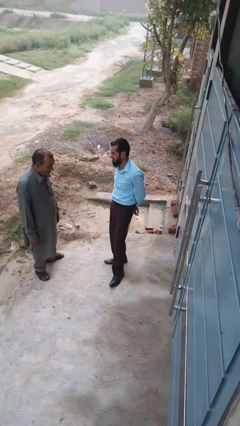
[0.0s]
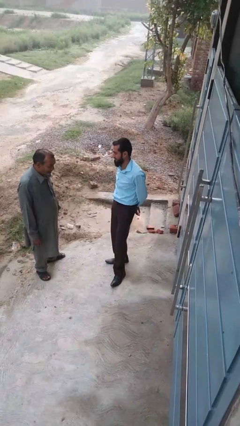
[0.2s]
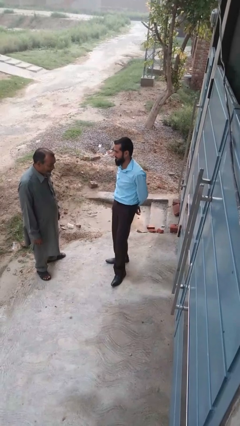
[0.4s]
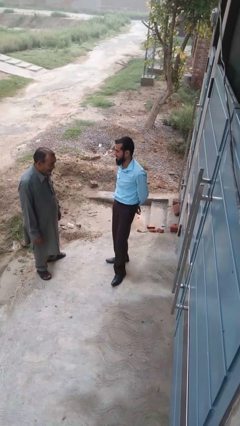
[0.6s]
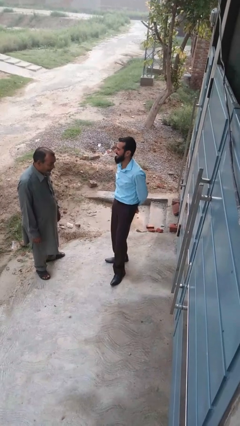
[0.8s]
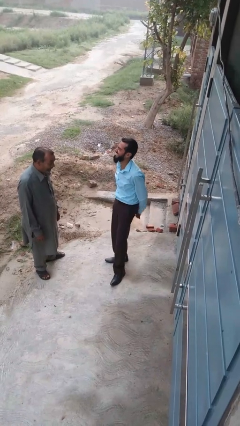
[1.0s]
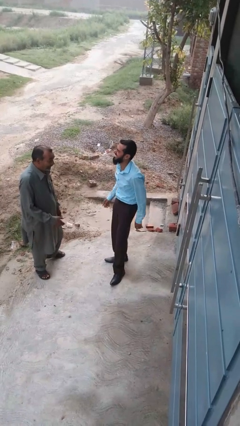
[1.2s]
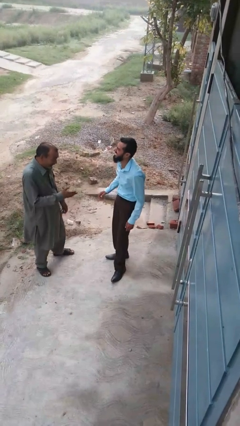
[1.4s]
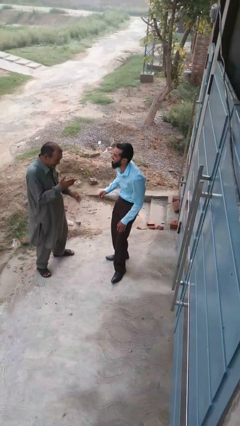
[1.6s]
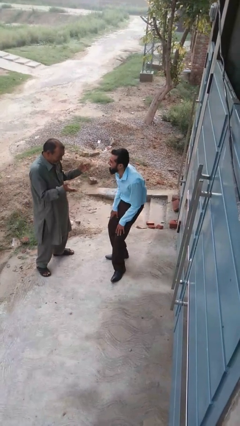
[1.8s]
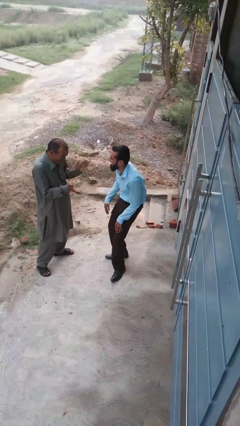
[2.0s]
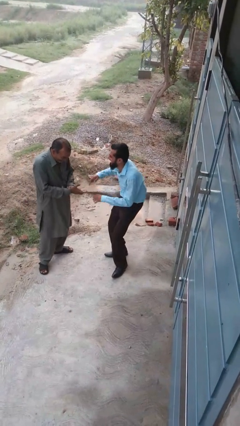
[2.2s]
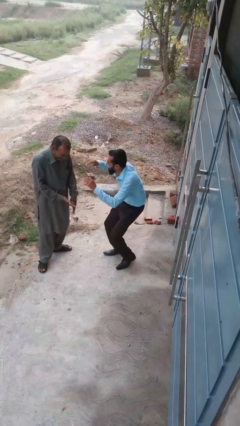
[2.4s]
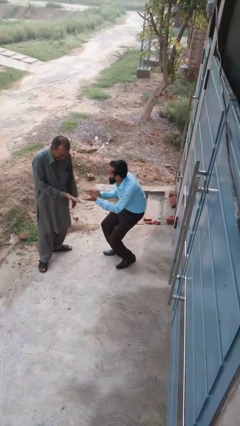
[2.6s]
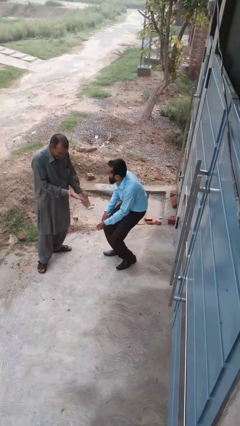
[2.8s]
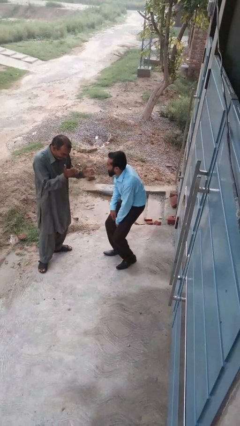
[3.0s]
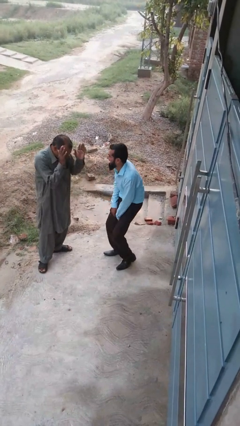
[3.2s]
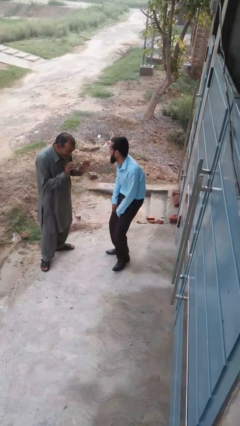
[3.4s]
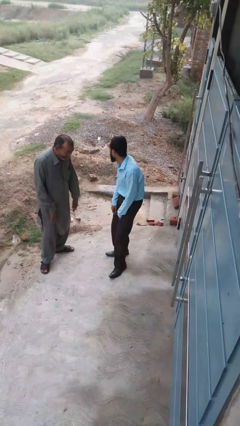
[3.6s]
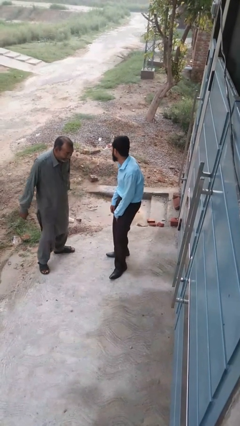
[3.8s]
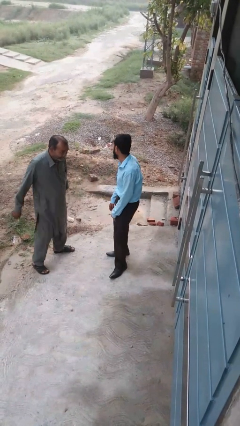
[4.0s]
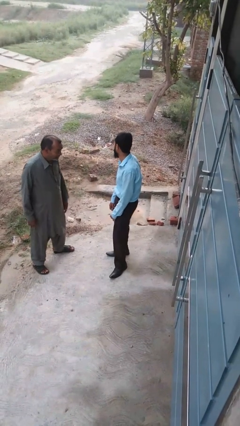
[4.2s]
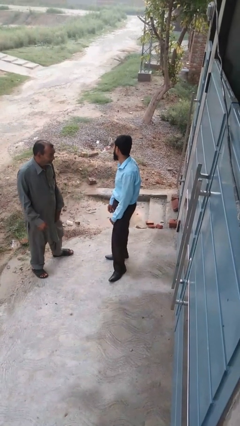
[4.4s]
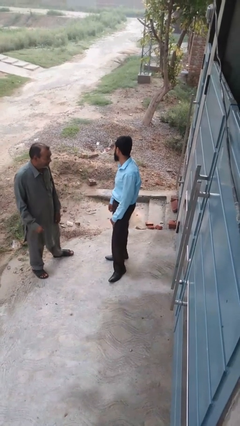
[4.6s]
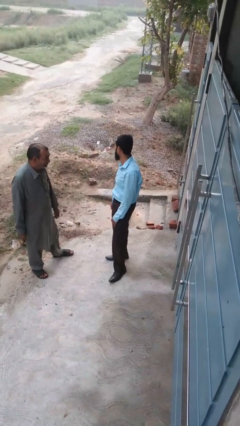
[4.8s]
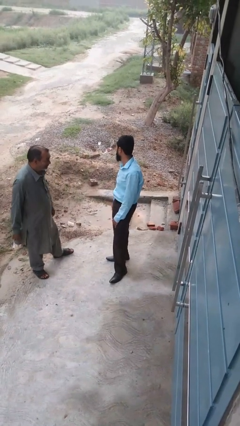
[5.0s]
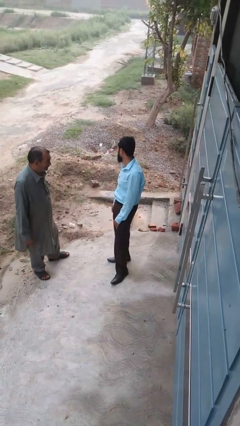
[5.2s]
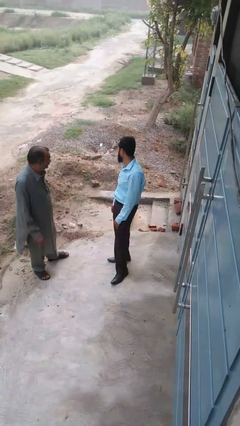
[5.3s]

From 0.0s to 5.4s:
person laughs with person

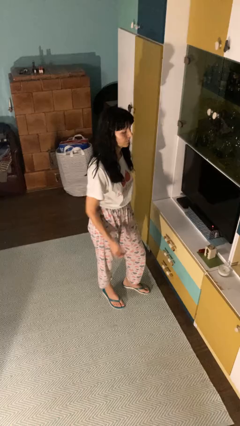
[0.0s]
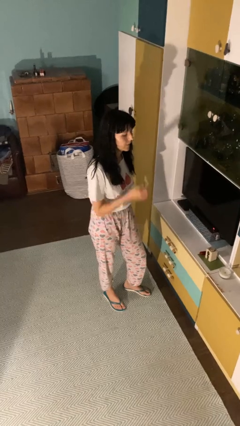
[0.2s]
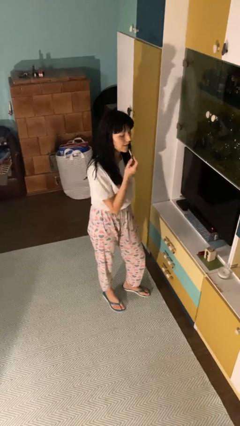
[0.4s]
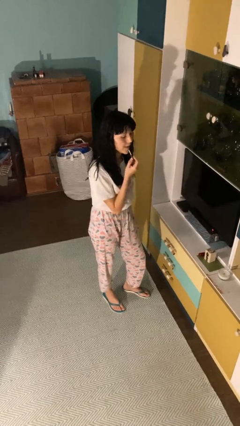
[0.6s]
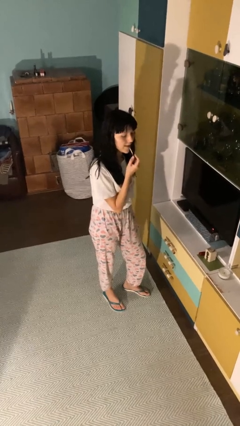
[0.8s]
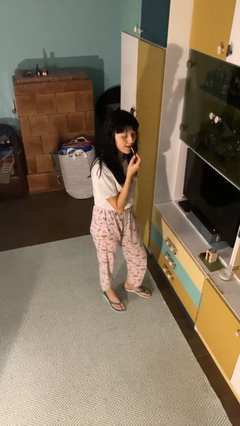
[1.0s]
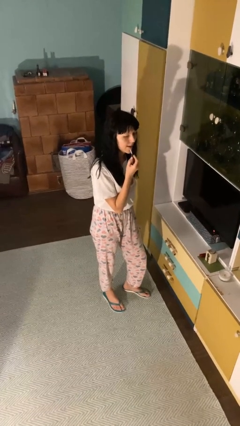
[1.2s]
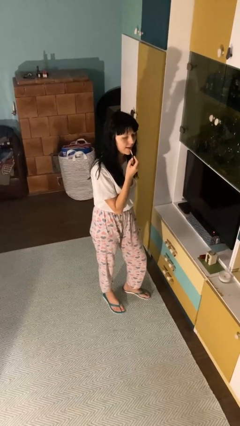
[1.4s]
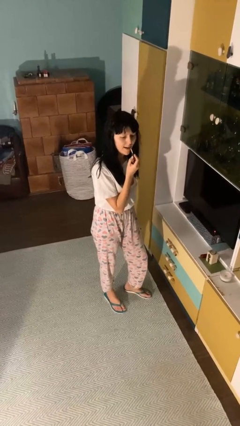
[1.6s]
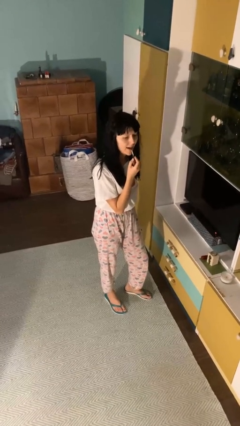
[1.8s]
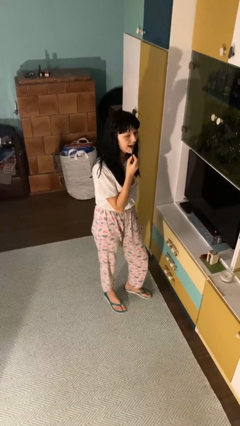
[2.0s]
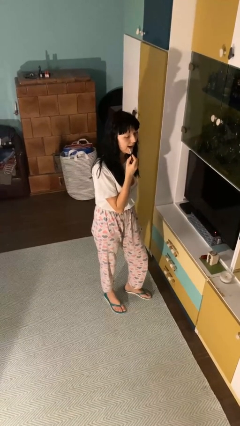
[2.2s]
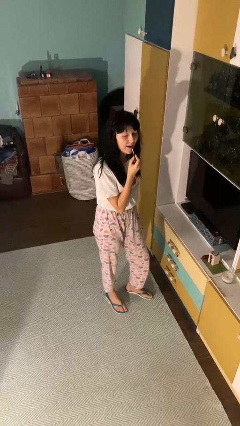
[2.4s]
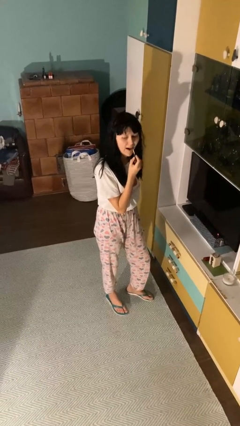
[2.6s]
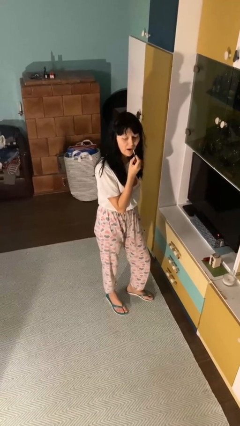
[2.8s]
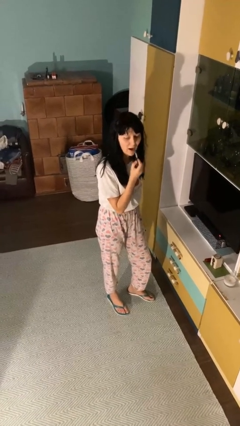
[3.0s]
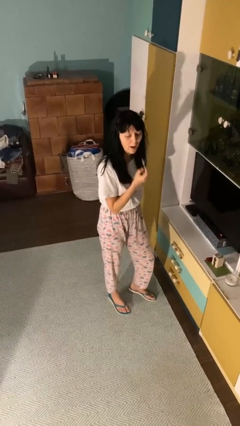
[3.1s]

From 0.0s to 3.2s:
person applies lip makeup

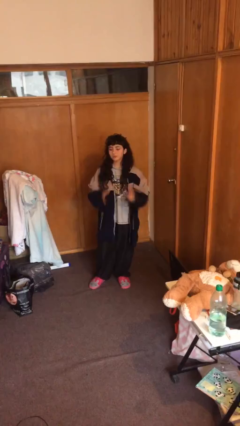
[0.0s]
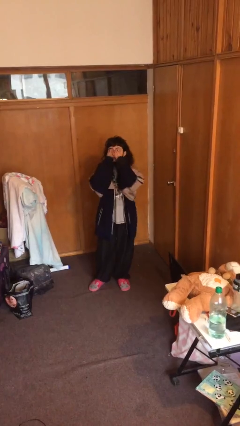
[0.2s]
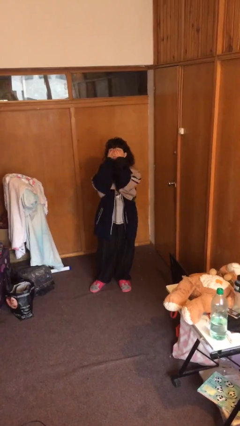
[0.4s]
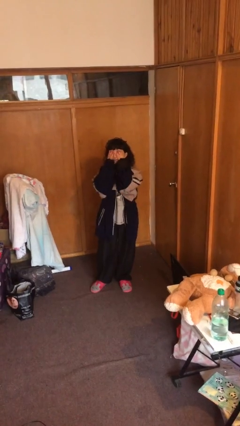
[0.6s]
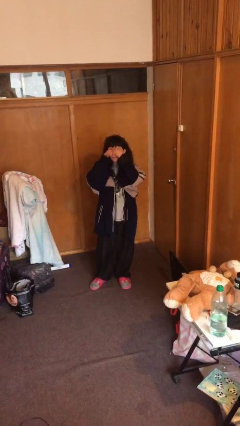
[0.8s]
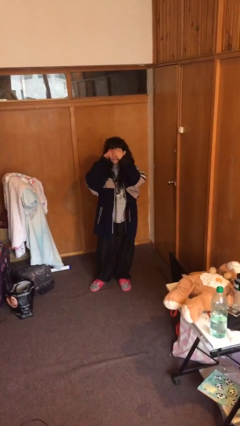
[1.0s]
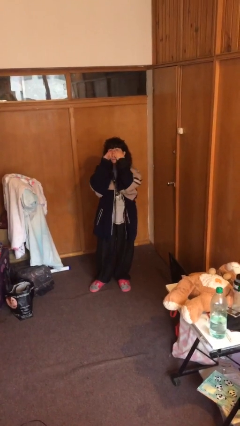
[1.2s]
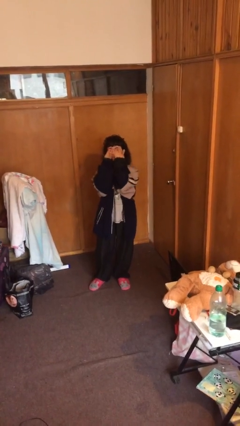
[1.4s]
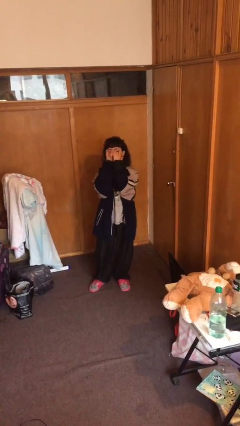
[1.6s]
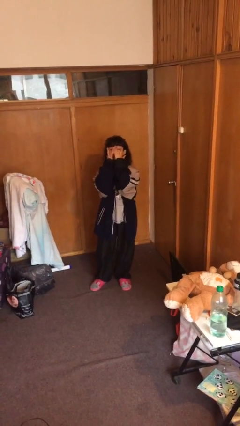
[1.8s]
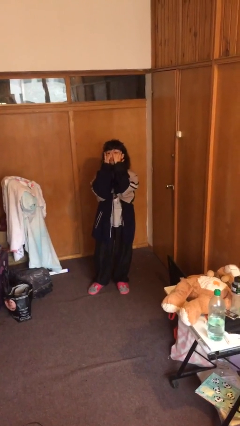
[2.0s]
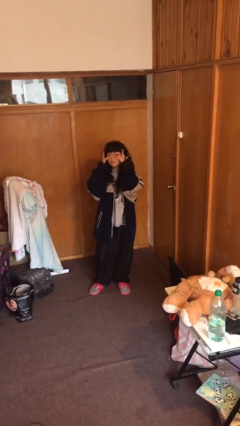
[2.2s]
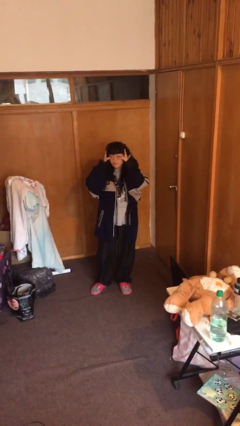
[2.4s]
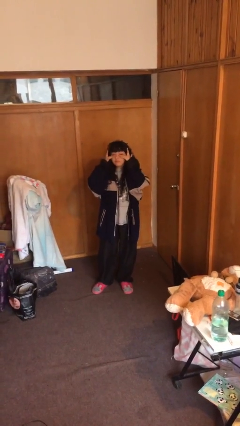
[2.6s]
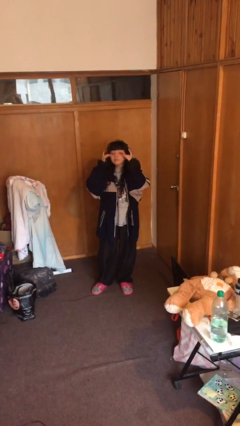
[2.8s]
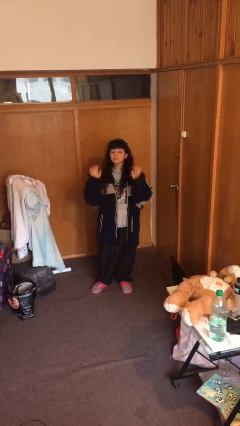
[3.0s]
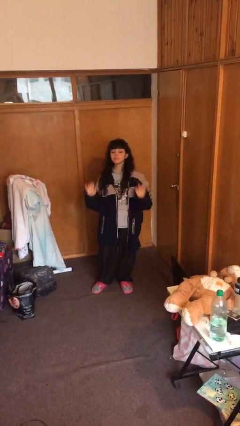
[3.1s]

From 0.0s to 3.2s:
person rubs eyes

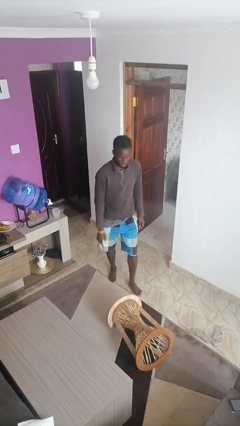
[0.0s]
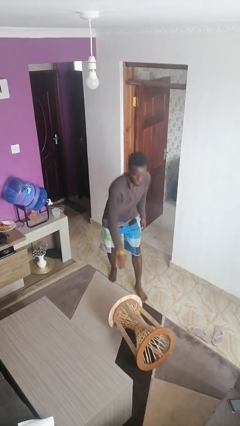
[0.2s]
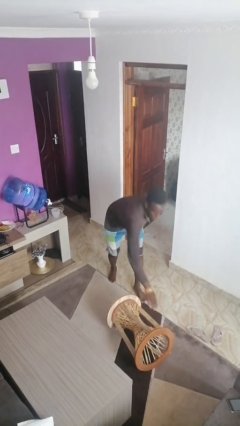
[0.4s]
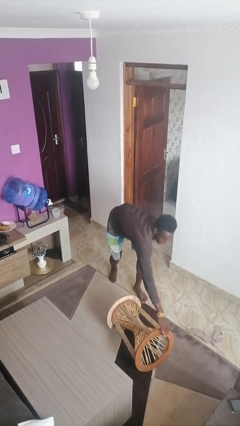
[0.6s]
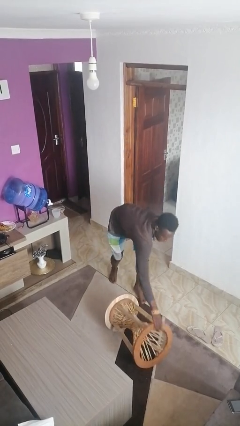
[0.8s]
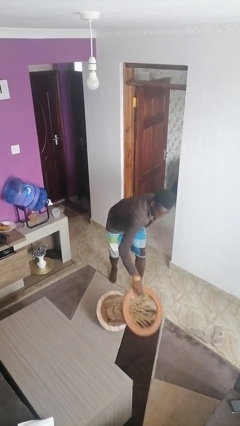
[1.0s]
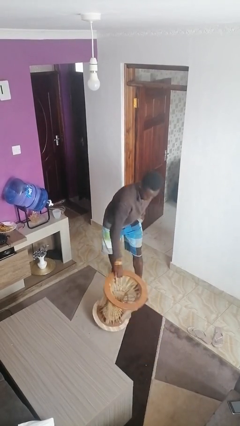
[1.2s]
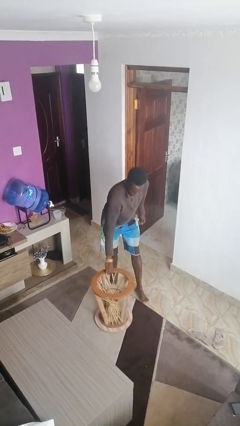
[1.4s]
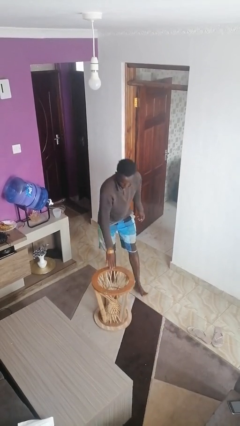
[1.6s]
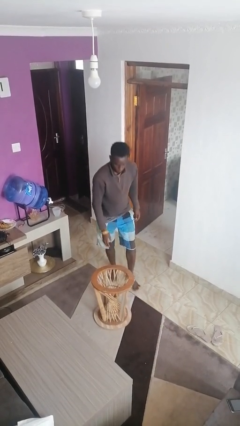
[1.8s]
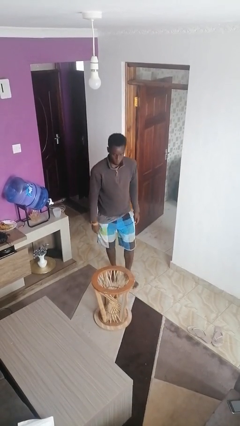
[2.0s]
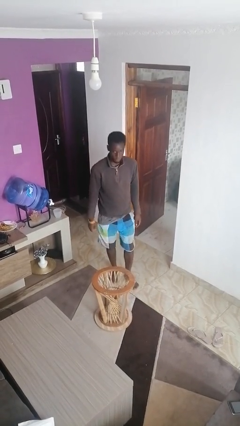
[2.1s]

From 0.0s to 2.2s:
person sets upright furniture

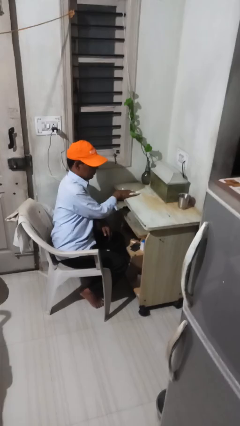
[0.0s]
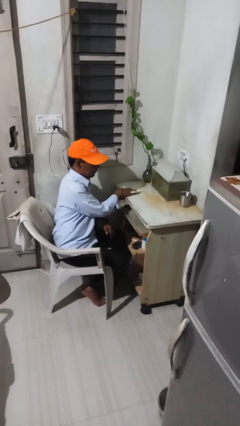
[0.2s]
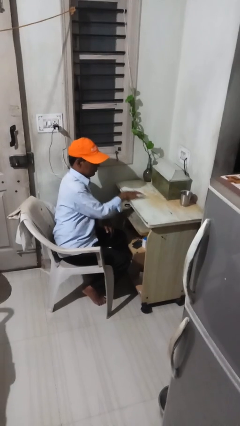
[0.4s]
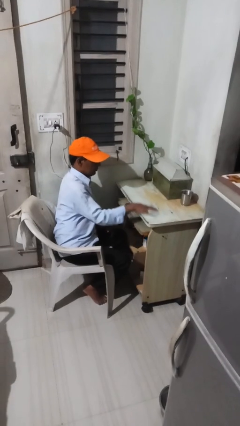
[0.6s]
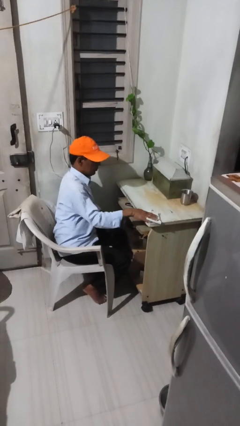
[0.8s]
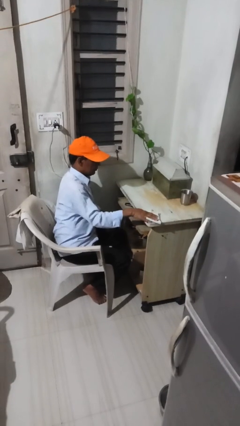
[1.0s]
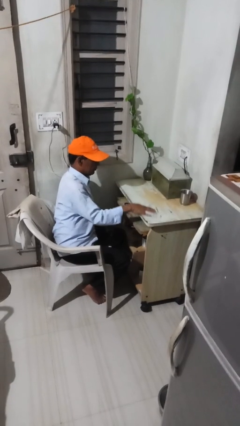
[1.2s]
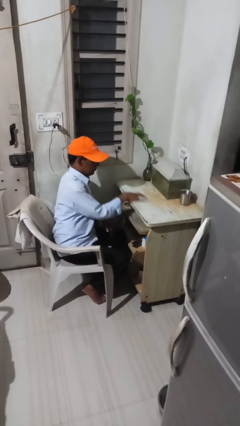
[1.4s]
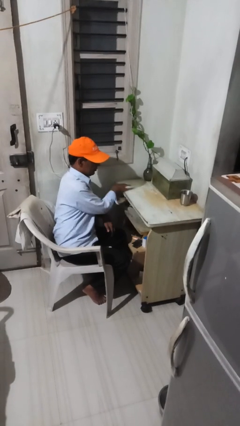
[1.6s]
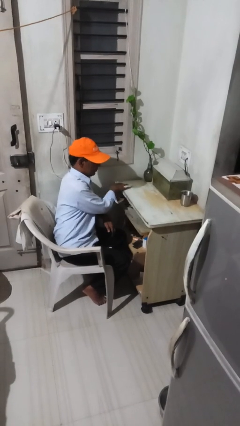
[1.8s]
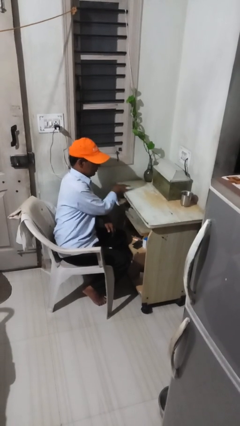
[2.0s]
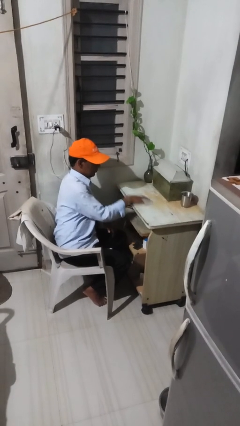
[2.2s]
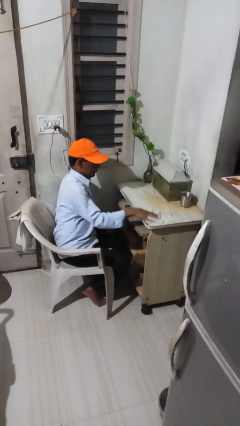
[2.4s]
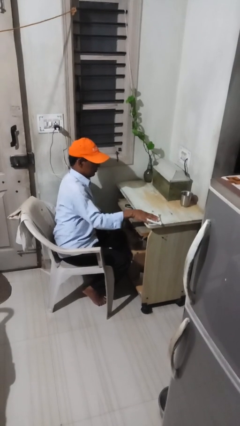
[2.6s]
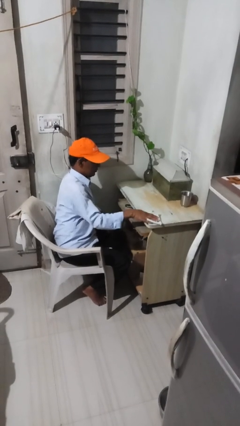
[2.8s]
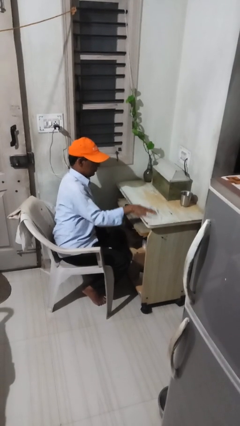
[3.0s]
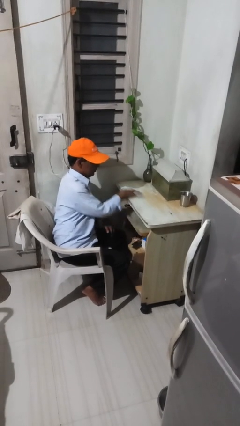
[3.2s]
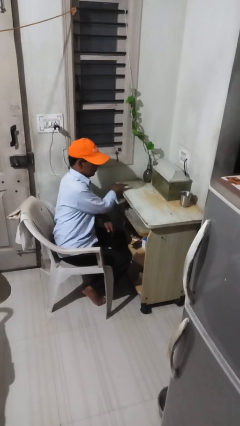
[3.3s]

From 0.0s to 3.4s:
person cleans table with rag

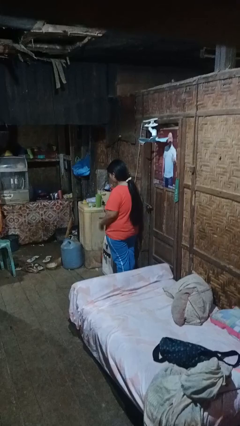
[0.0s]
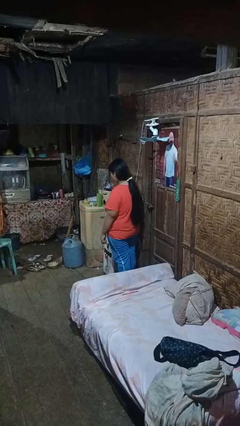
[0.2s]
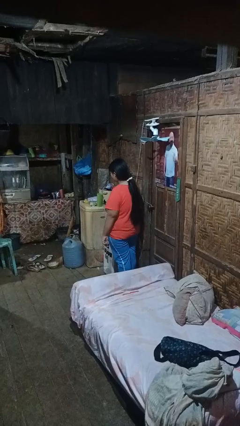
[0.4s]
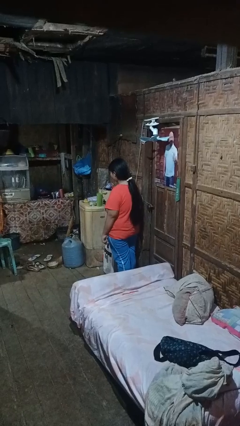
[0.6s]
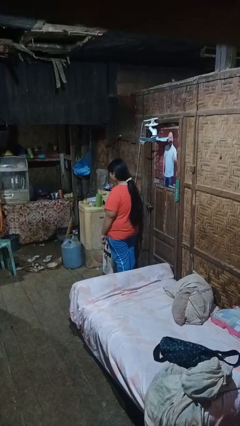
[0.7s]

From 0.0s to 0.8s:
person extinguishes candle
